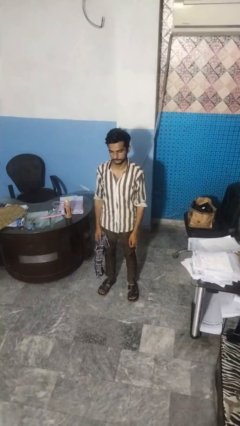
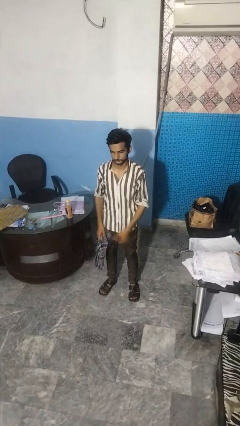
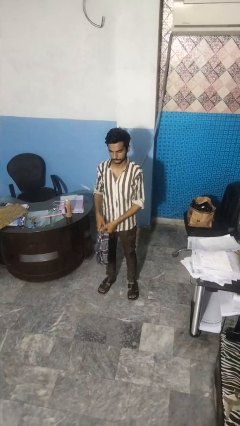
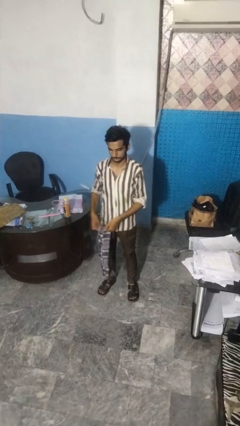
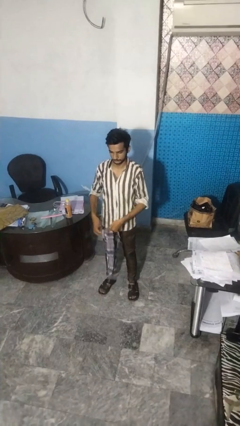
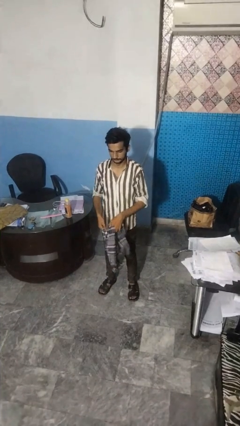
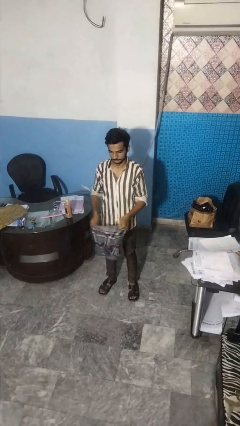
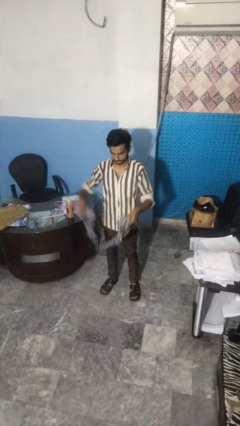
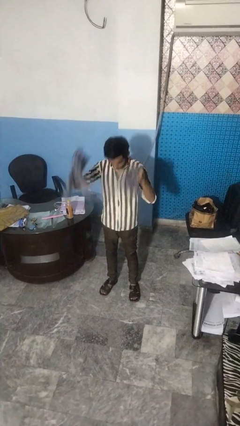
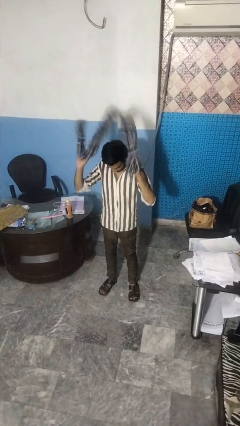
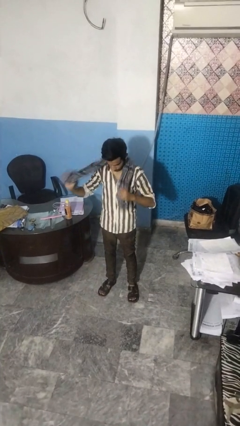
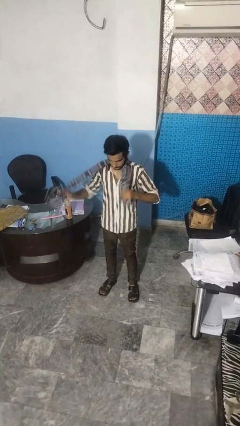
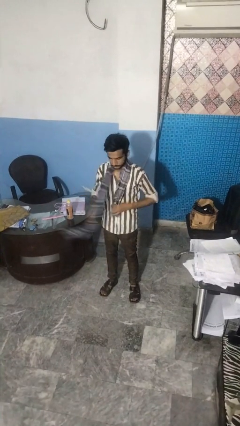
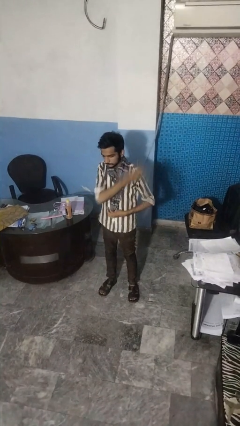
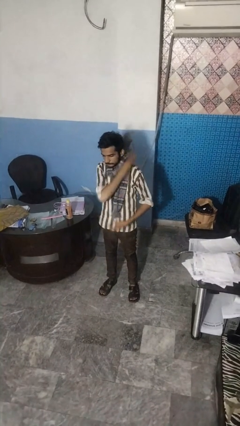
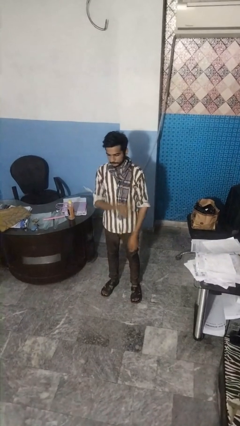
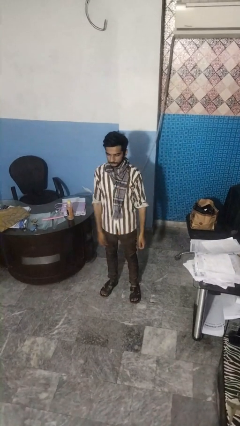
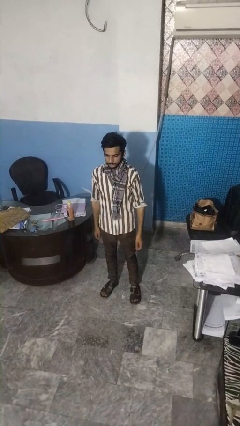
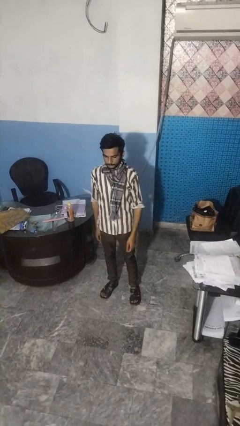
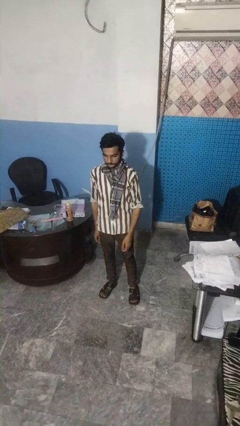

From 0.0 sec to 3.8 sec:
person puts on scarf

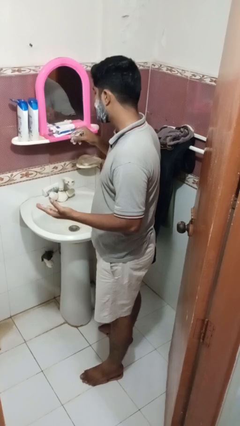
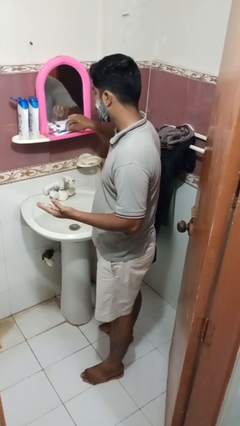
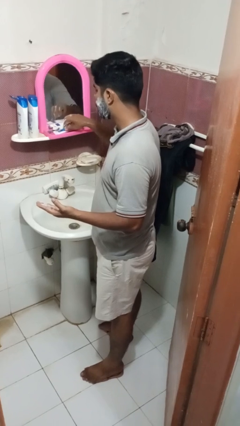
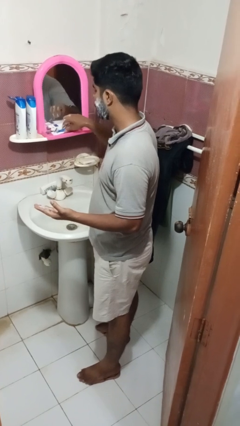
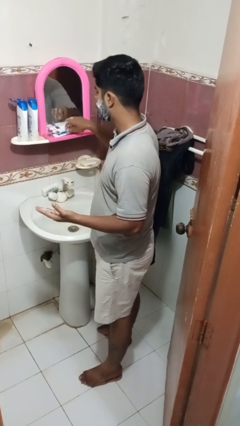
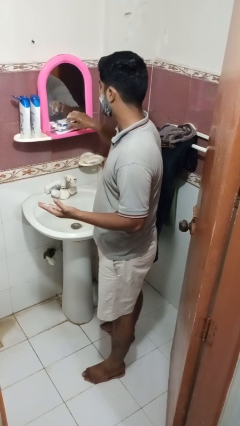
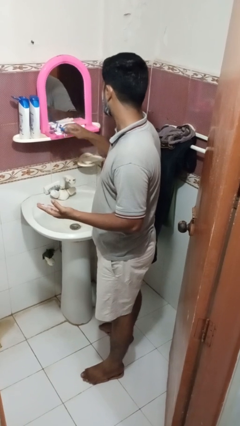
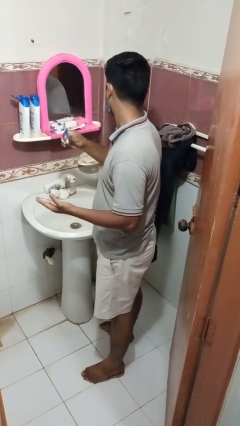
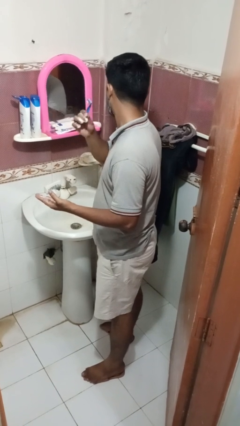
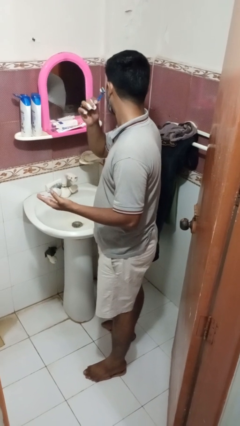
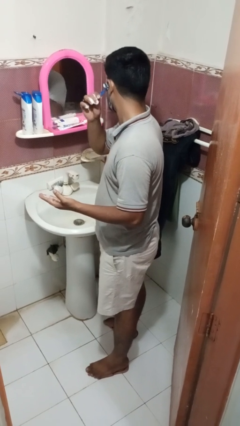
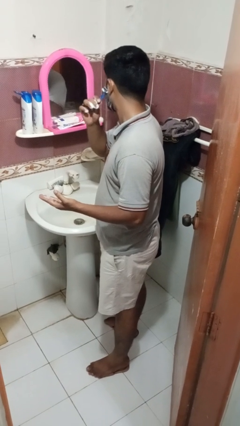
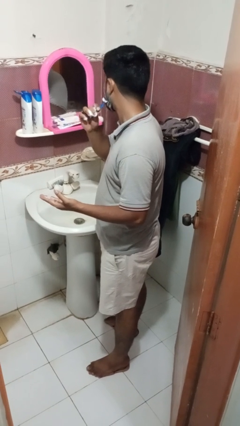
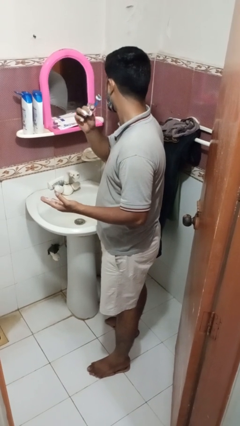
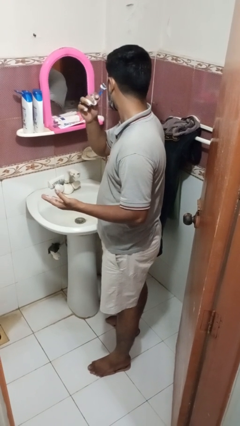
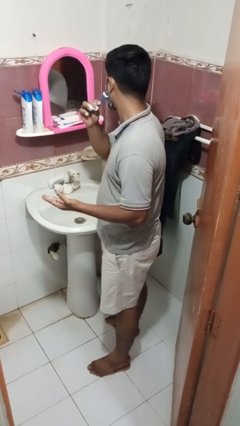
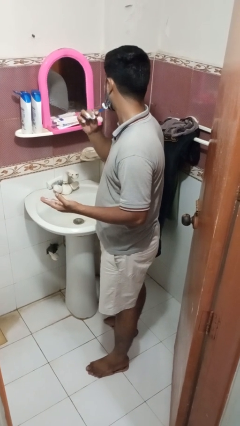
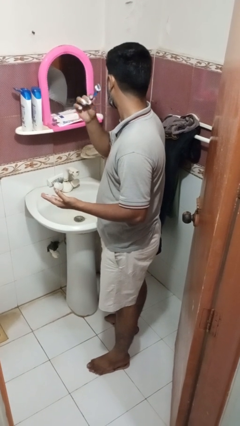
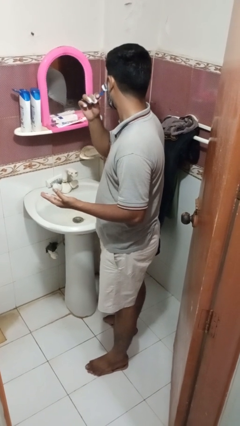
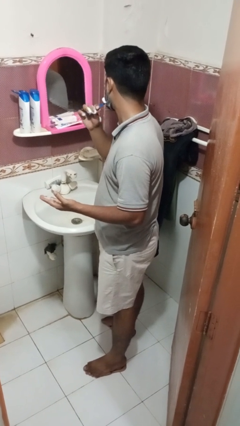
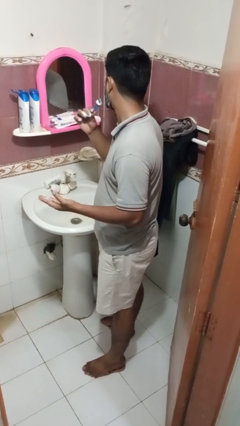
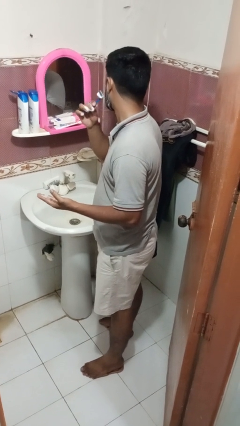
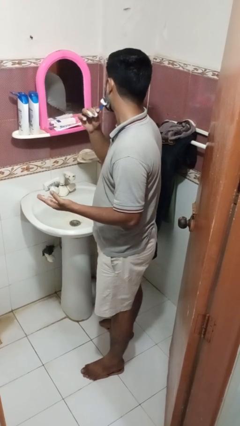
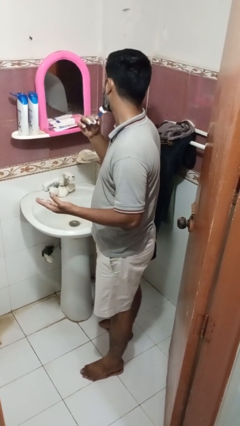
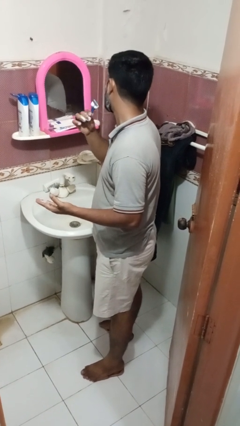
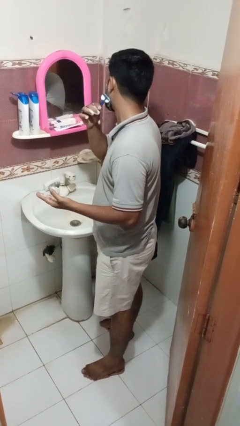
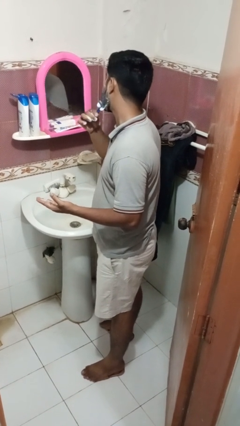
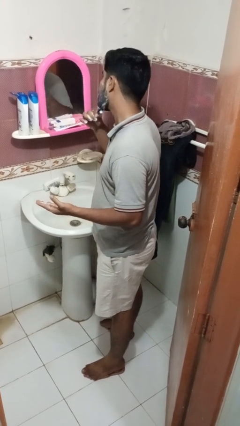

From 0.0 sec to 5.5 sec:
person shaves face

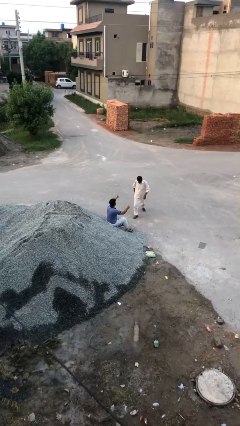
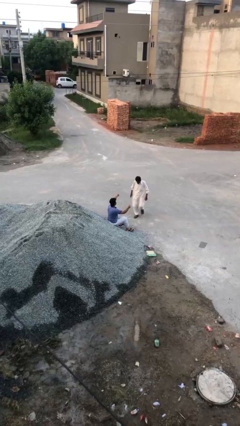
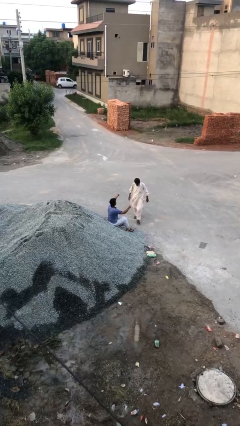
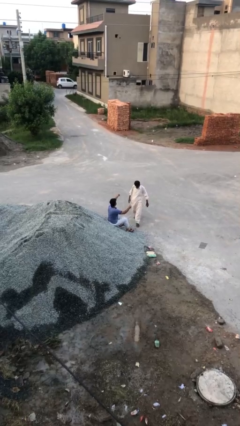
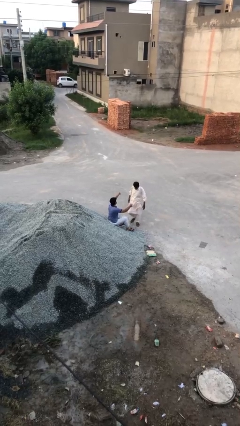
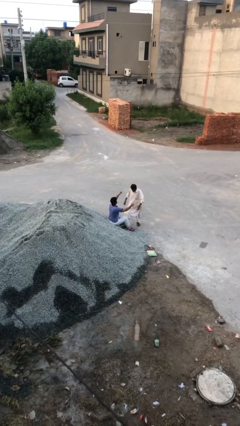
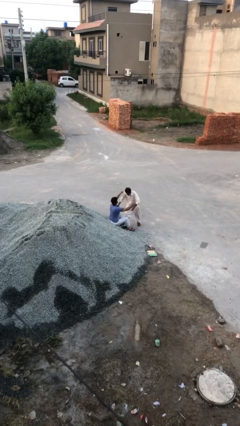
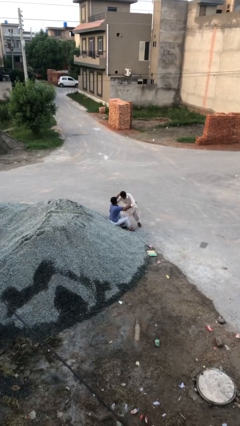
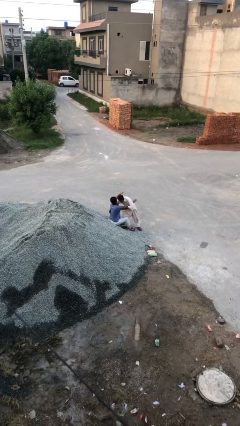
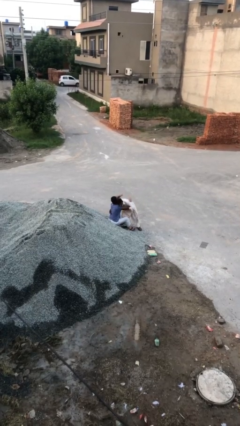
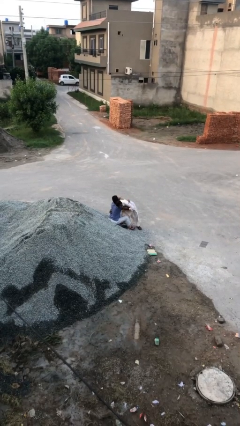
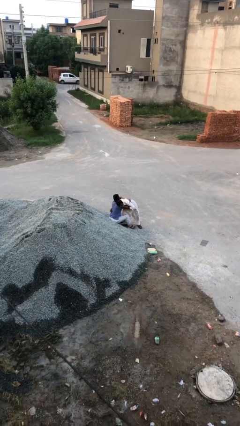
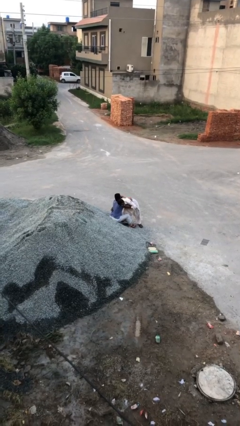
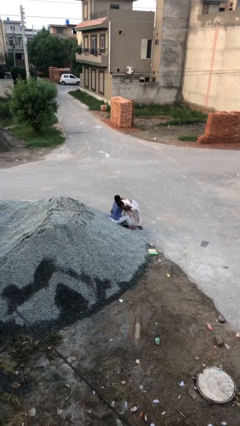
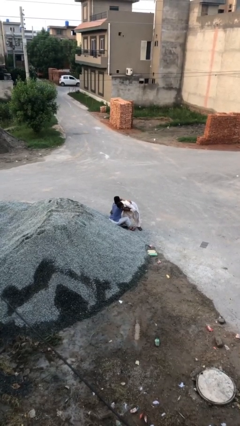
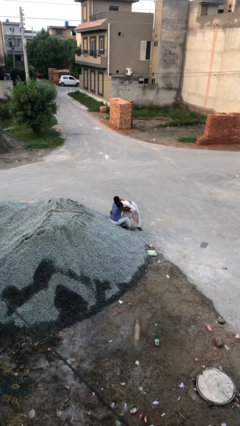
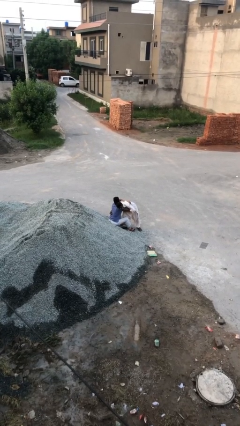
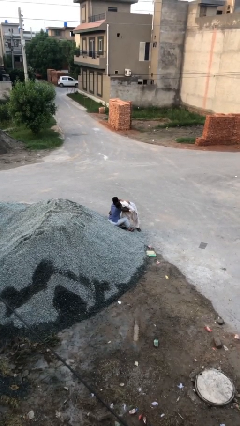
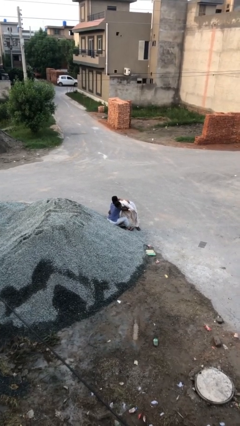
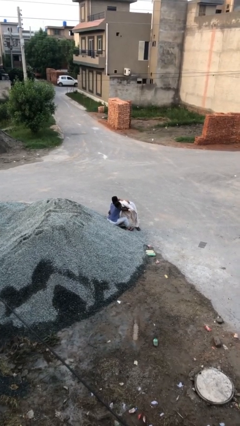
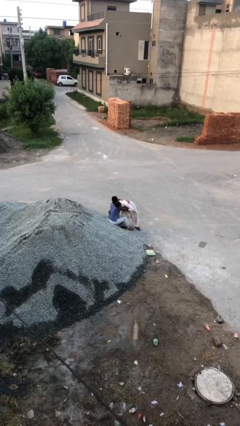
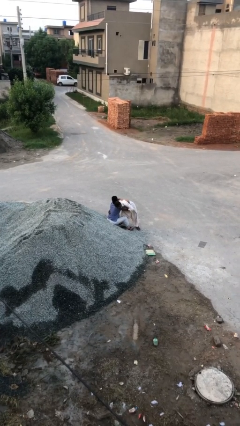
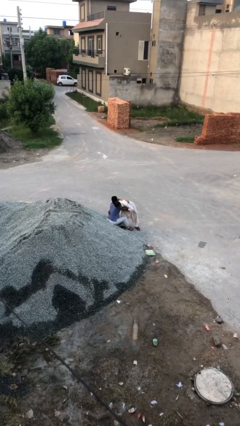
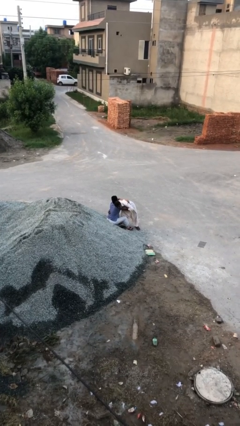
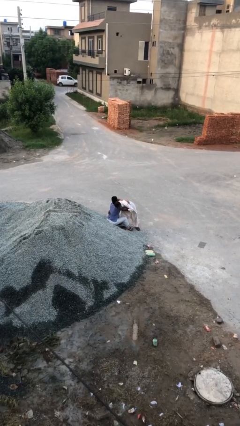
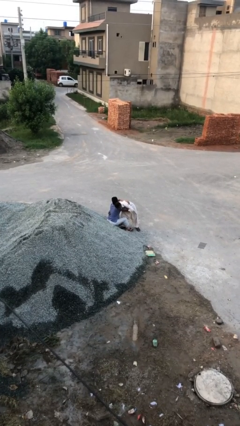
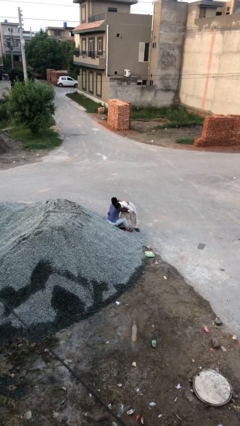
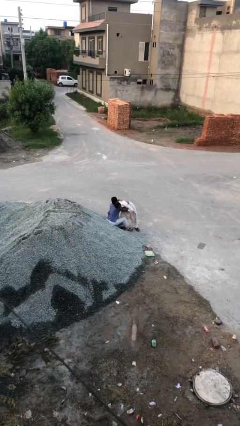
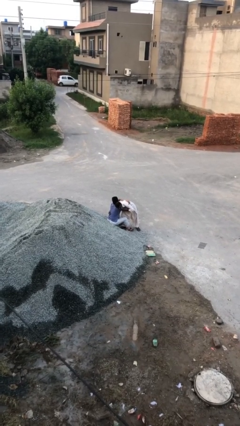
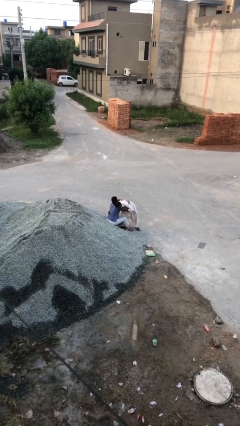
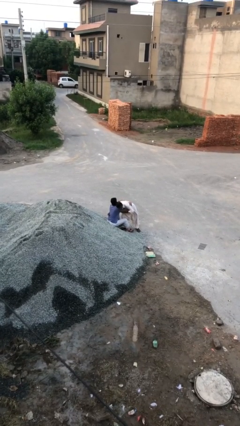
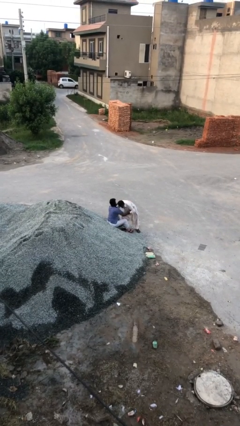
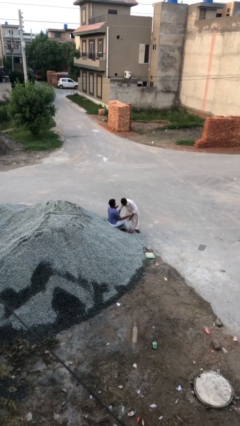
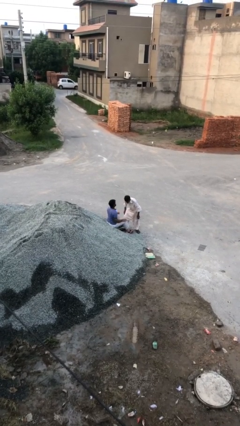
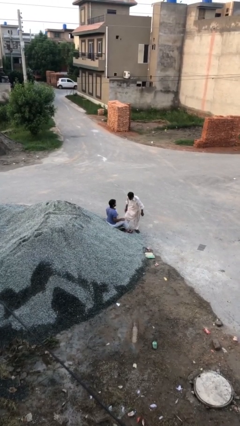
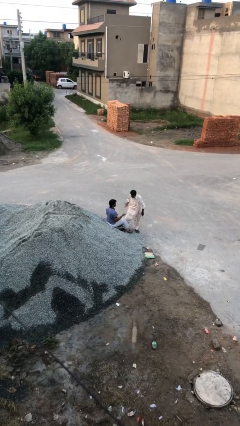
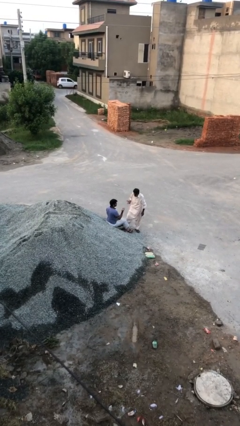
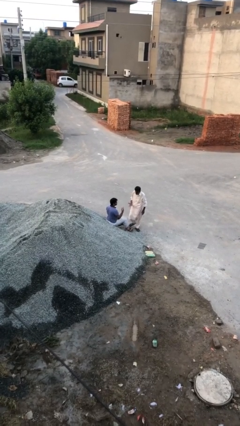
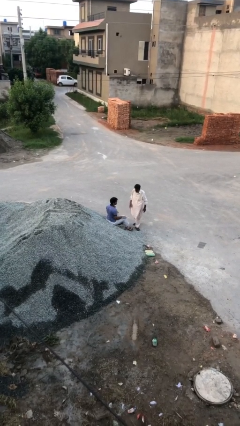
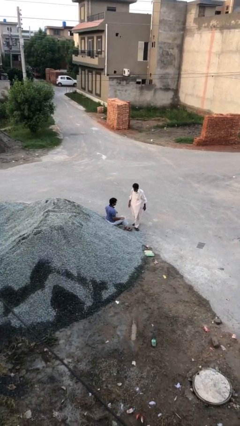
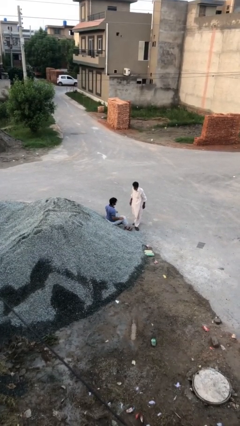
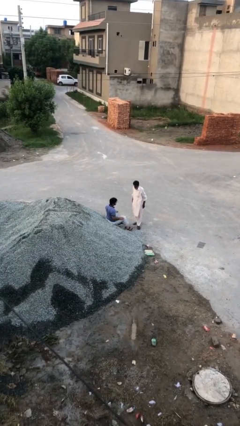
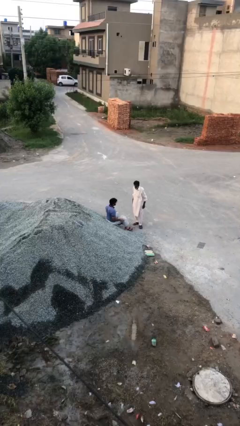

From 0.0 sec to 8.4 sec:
person embraces person
